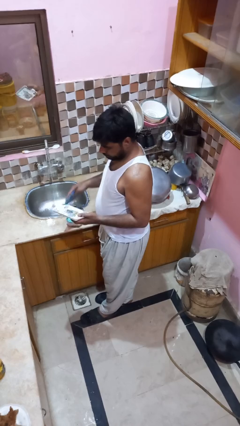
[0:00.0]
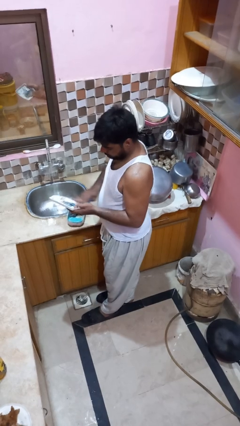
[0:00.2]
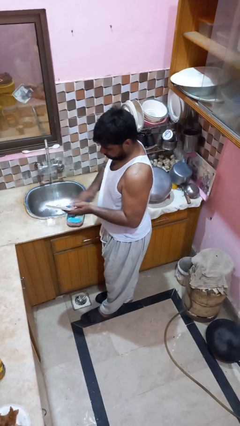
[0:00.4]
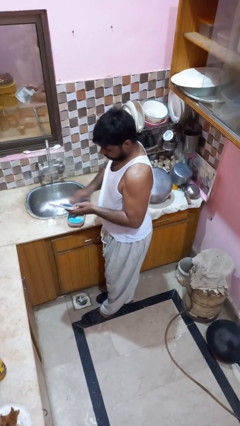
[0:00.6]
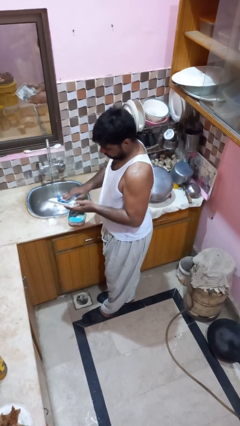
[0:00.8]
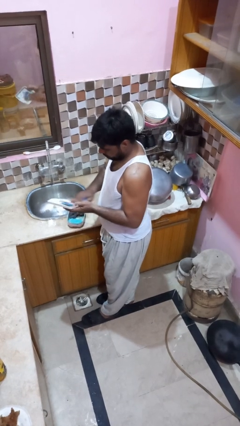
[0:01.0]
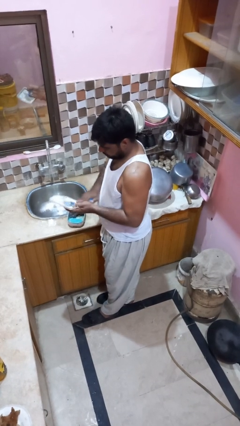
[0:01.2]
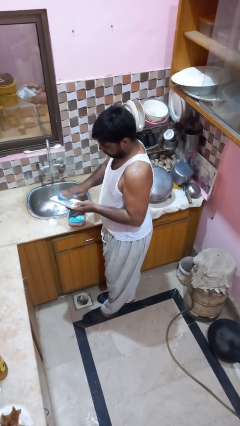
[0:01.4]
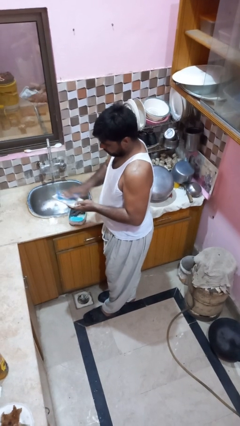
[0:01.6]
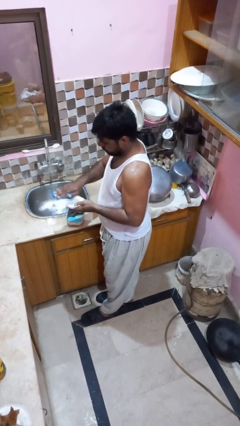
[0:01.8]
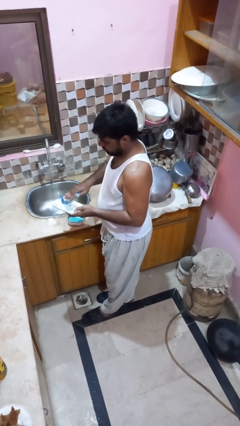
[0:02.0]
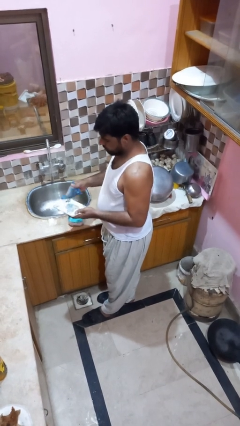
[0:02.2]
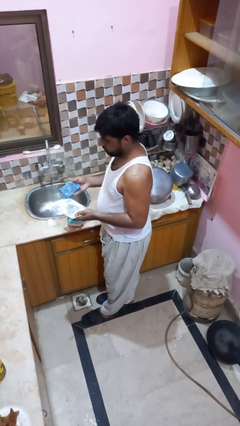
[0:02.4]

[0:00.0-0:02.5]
person washes dish

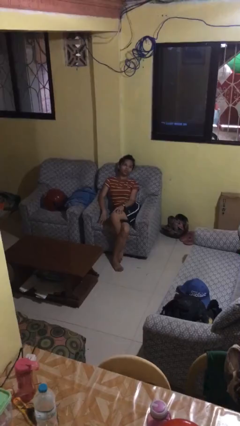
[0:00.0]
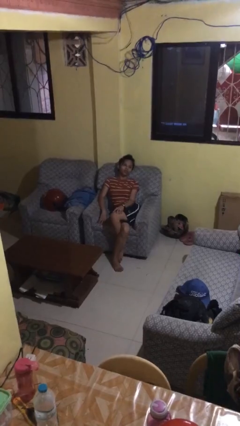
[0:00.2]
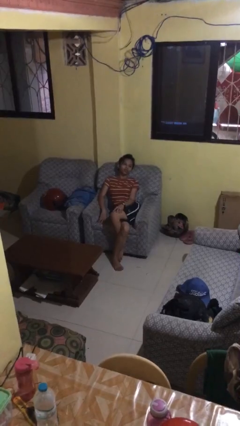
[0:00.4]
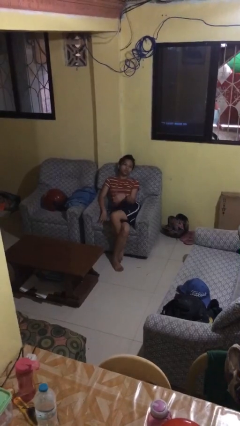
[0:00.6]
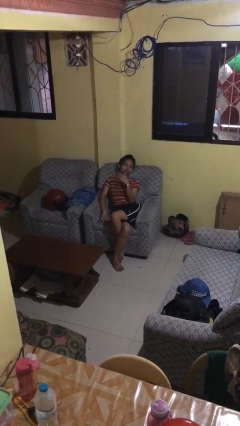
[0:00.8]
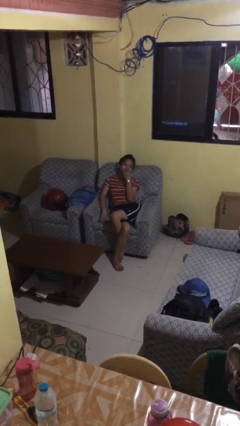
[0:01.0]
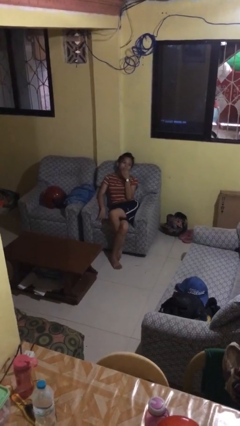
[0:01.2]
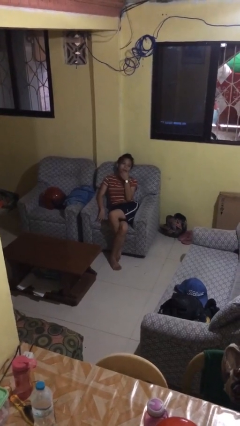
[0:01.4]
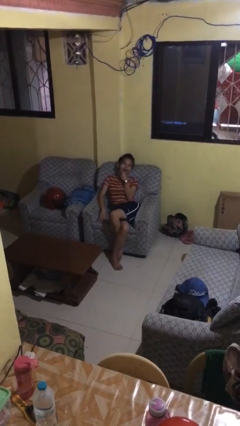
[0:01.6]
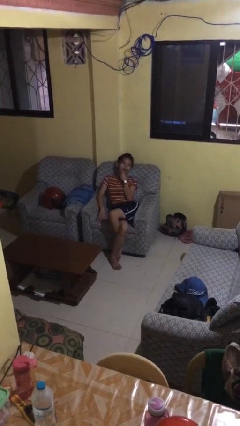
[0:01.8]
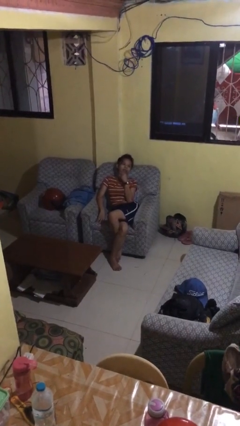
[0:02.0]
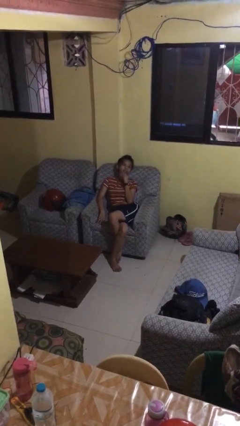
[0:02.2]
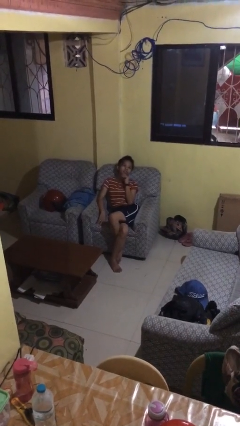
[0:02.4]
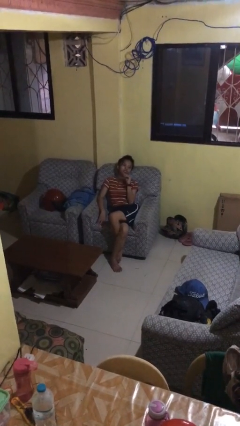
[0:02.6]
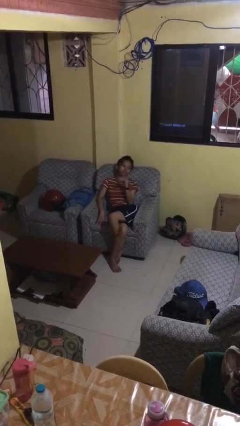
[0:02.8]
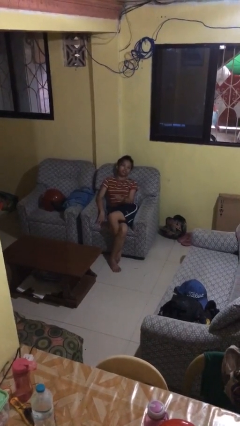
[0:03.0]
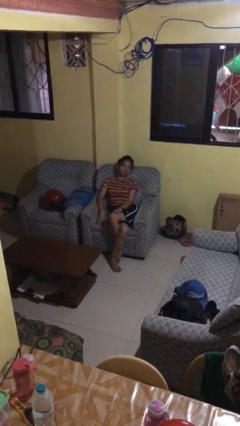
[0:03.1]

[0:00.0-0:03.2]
person strokes chin

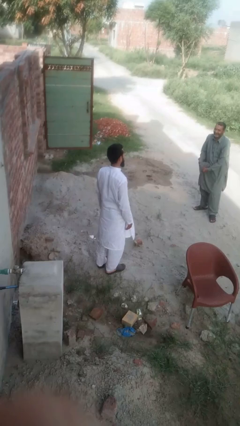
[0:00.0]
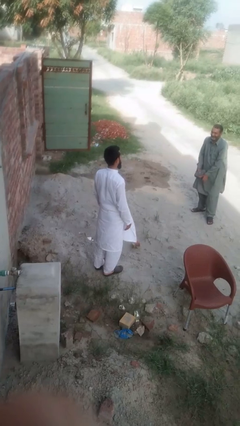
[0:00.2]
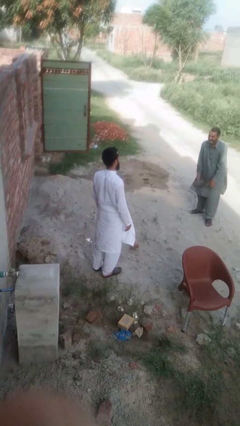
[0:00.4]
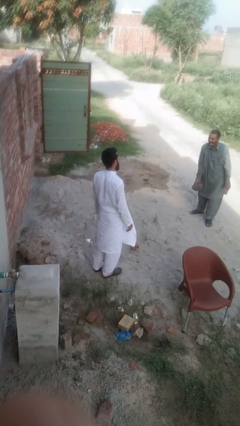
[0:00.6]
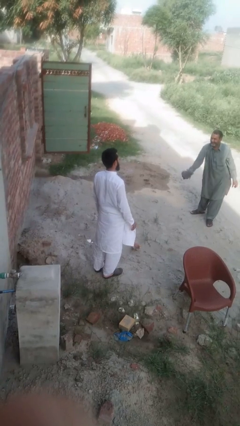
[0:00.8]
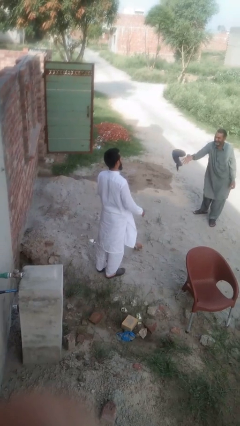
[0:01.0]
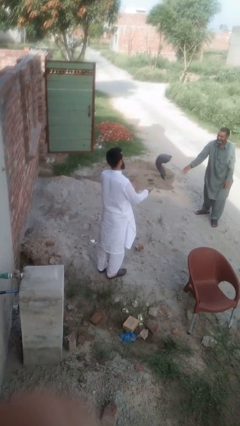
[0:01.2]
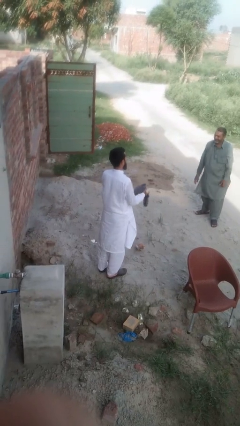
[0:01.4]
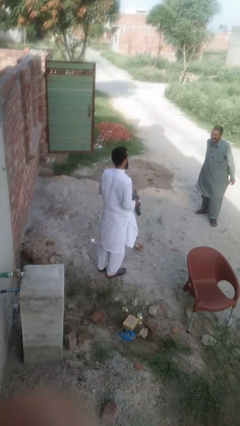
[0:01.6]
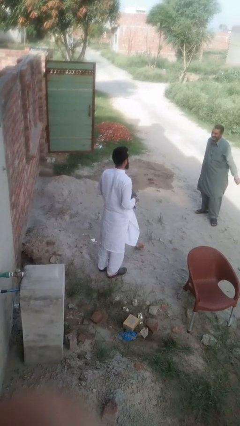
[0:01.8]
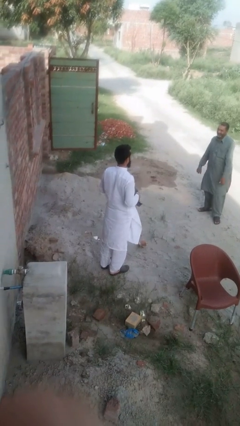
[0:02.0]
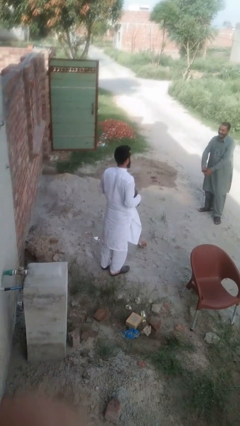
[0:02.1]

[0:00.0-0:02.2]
person catches object from person

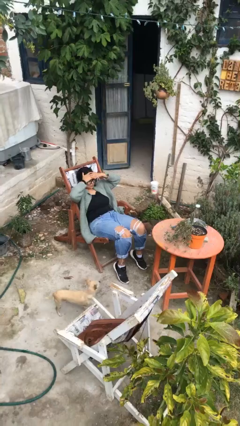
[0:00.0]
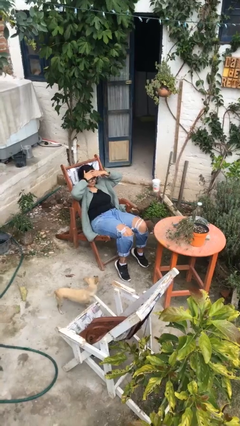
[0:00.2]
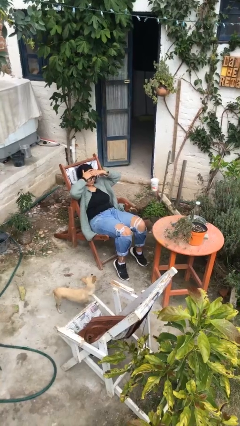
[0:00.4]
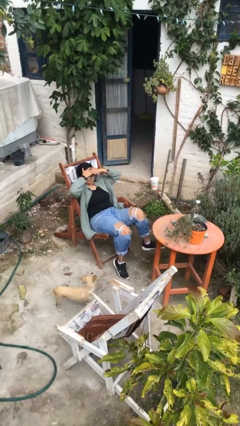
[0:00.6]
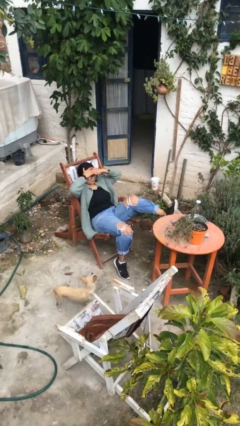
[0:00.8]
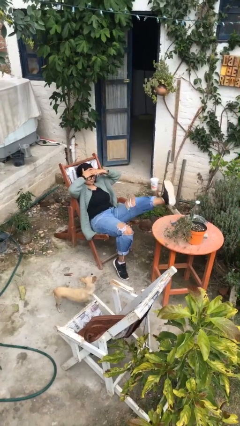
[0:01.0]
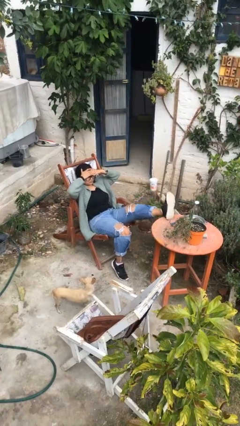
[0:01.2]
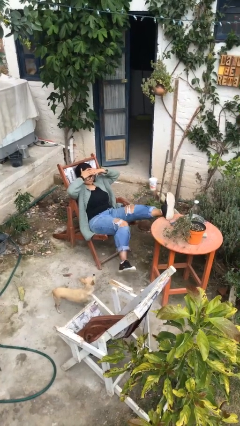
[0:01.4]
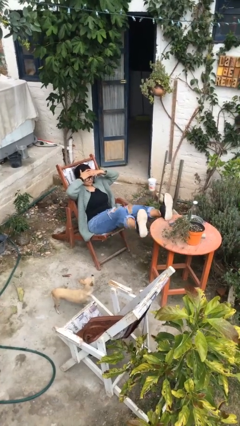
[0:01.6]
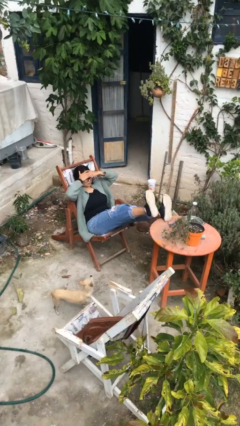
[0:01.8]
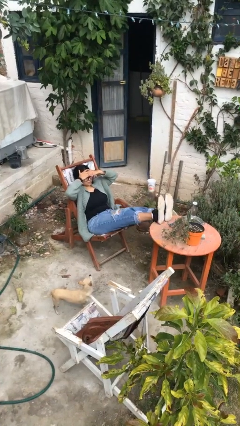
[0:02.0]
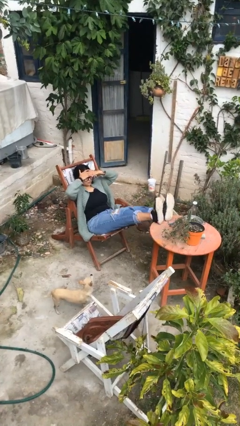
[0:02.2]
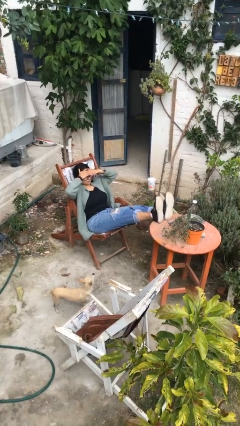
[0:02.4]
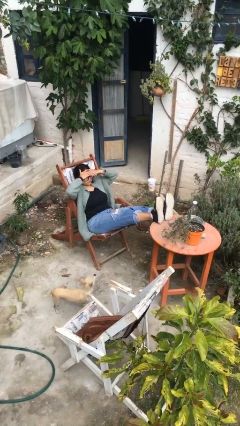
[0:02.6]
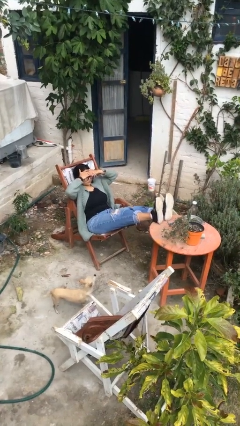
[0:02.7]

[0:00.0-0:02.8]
person puts feet up

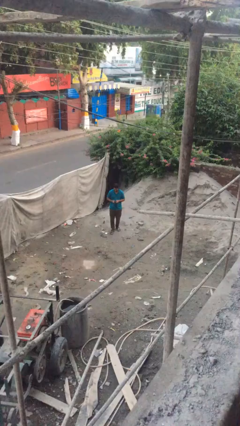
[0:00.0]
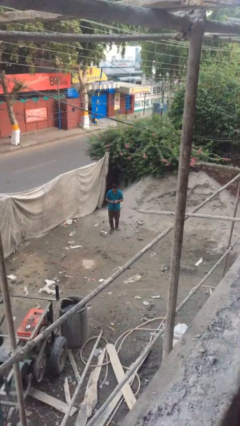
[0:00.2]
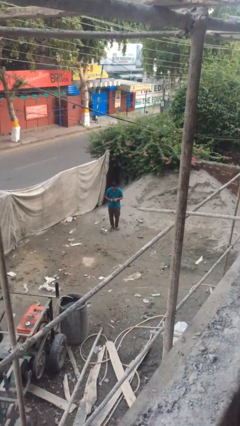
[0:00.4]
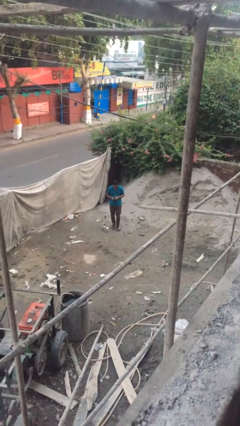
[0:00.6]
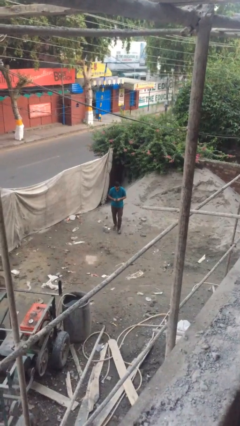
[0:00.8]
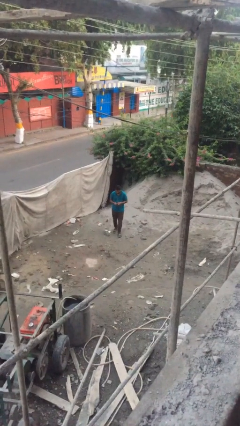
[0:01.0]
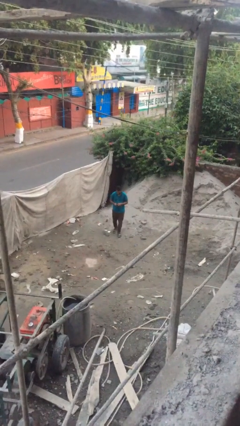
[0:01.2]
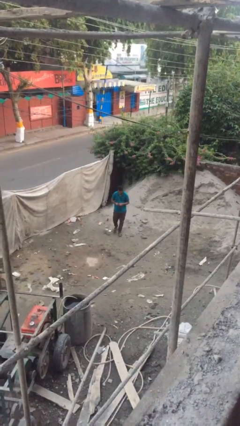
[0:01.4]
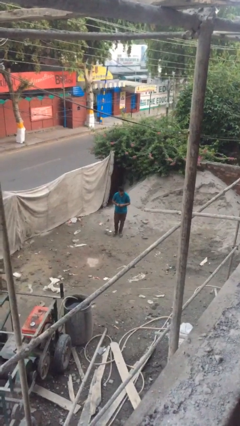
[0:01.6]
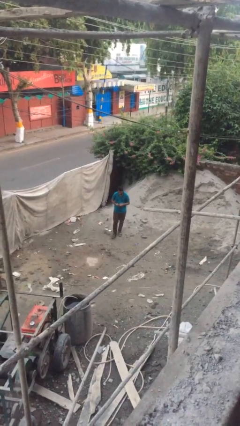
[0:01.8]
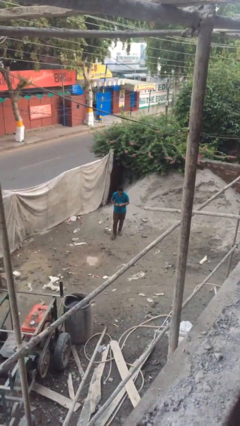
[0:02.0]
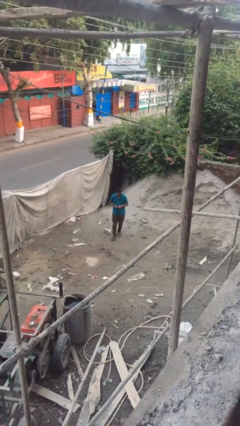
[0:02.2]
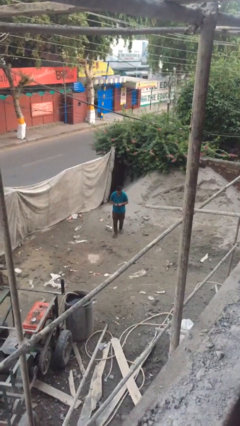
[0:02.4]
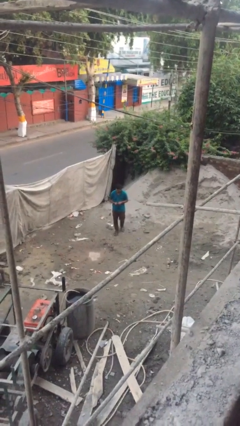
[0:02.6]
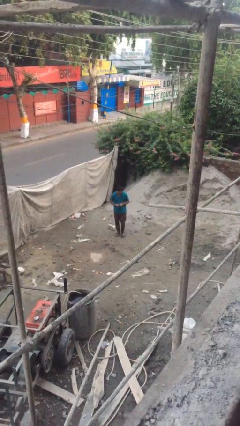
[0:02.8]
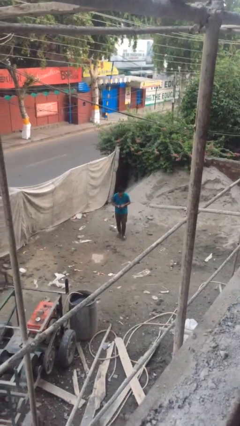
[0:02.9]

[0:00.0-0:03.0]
person texts on phone

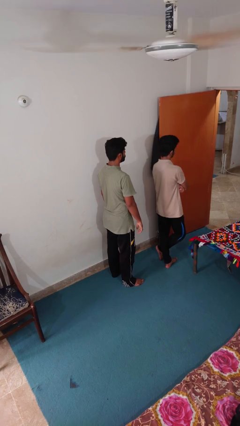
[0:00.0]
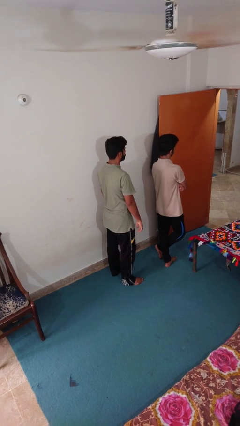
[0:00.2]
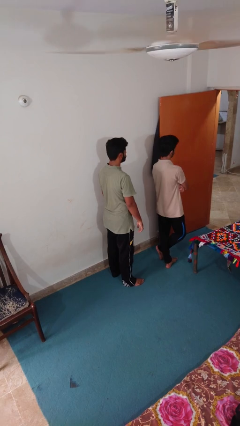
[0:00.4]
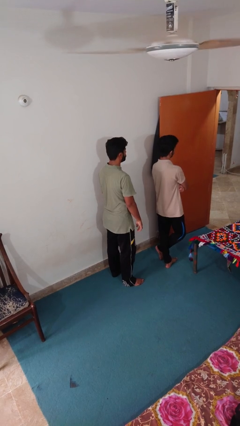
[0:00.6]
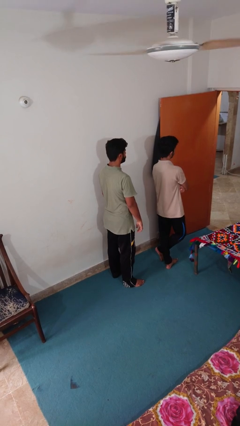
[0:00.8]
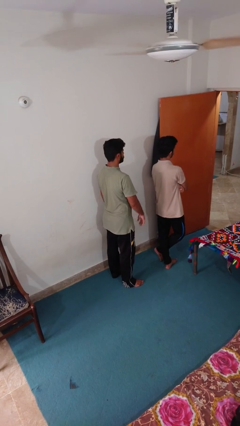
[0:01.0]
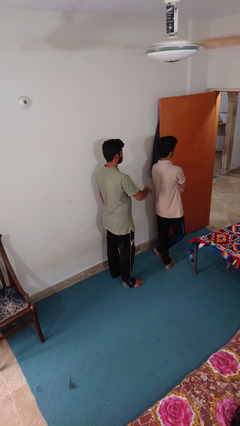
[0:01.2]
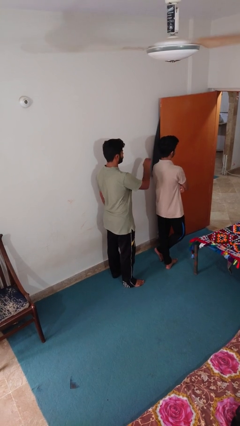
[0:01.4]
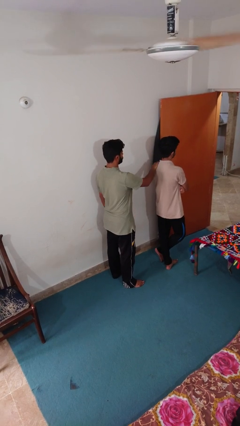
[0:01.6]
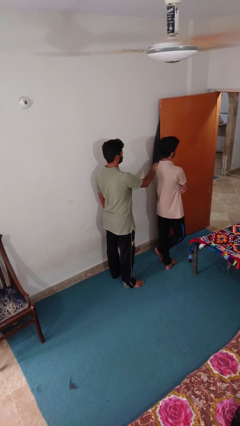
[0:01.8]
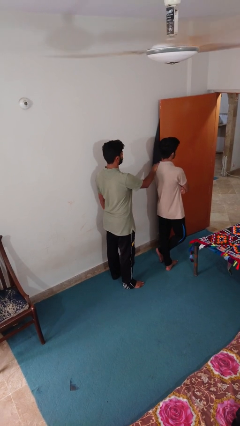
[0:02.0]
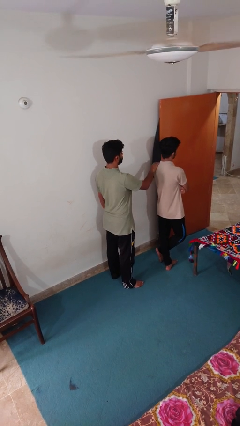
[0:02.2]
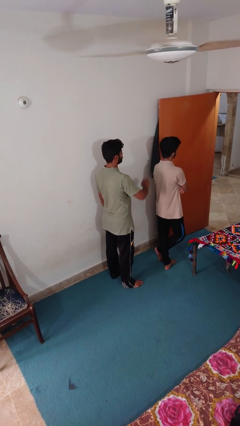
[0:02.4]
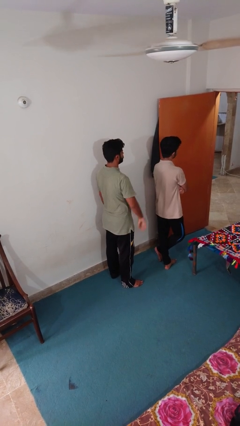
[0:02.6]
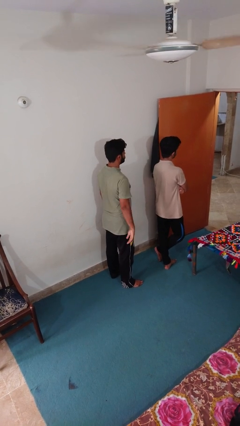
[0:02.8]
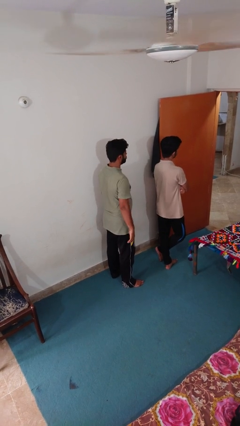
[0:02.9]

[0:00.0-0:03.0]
person touches back of person

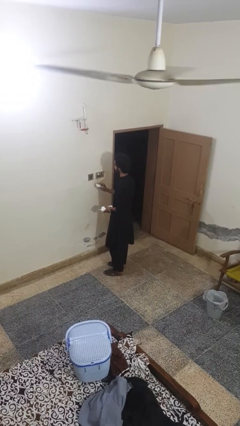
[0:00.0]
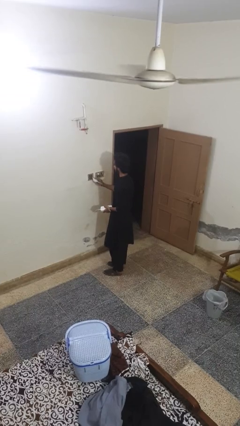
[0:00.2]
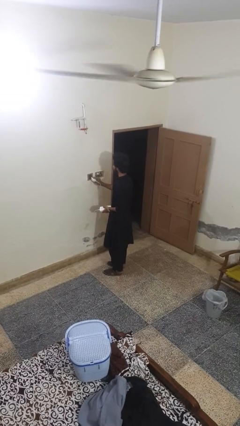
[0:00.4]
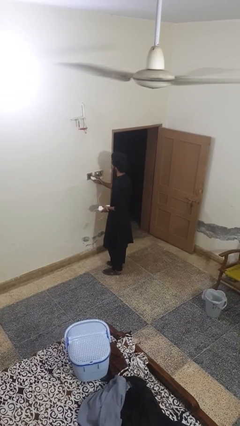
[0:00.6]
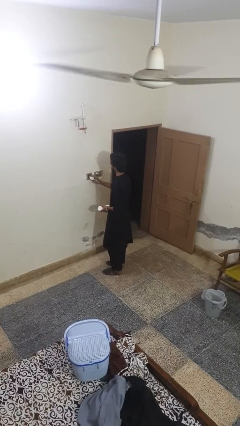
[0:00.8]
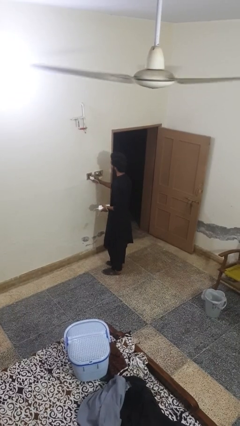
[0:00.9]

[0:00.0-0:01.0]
person plugs into electrical socket
